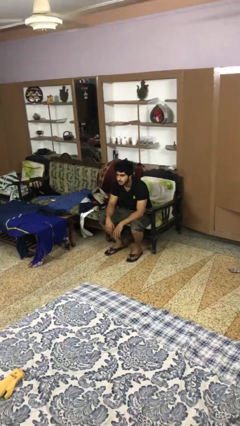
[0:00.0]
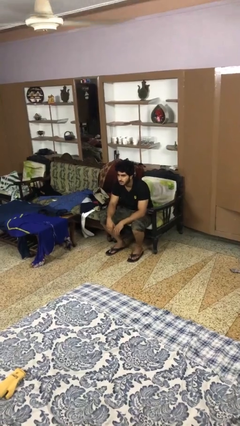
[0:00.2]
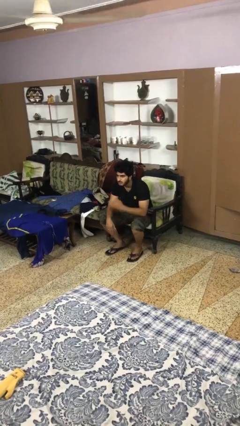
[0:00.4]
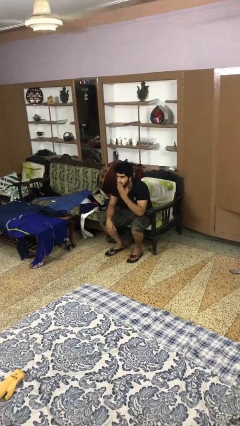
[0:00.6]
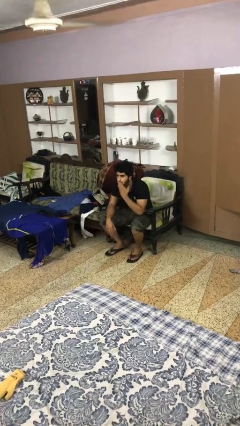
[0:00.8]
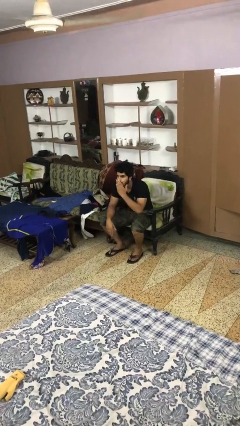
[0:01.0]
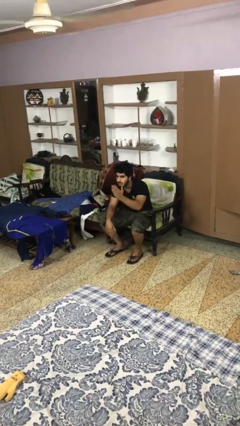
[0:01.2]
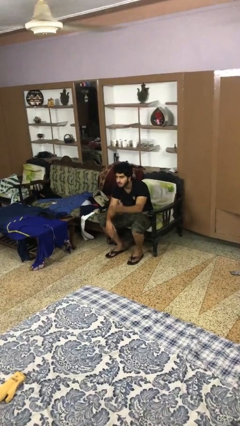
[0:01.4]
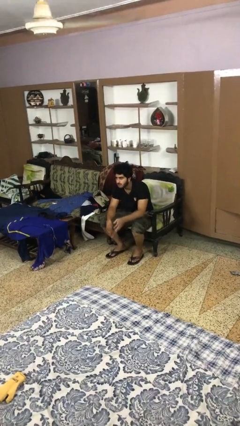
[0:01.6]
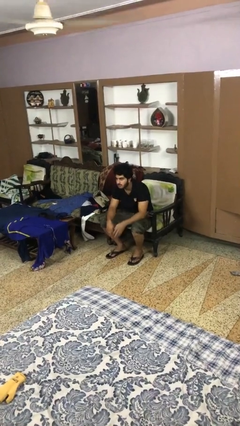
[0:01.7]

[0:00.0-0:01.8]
person gestures blow kiss

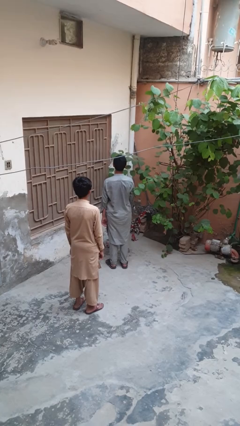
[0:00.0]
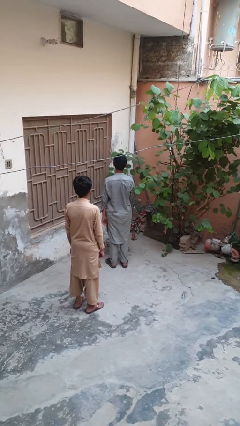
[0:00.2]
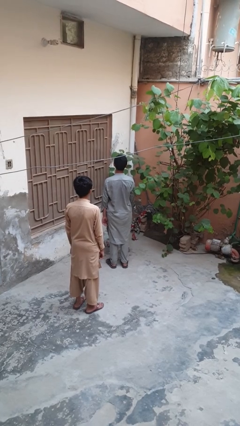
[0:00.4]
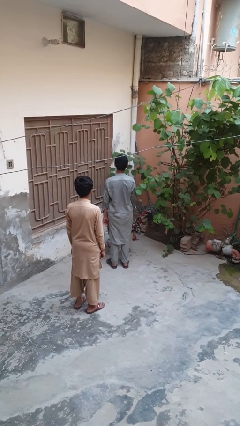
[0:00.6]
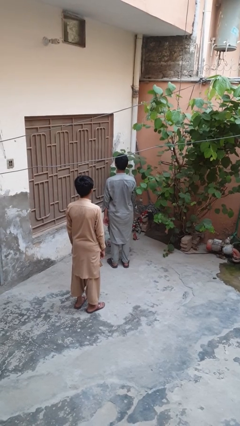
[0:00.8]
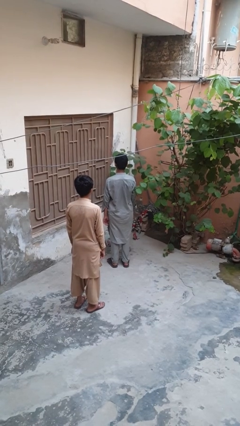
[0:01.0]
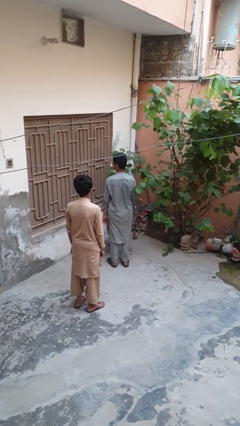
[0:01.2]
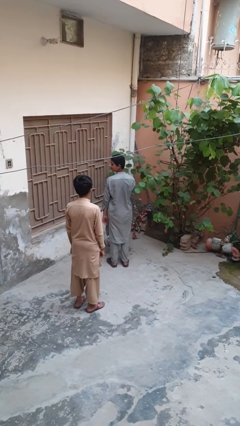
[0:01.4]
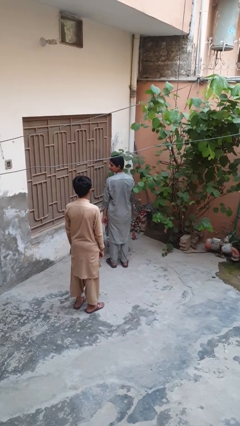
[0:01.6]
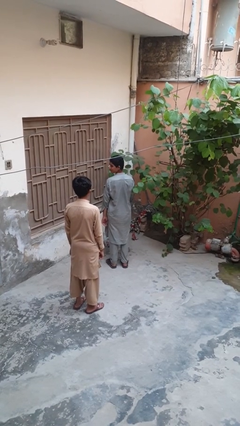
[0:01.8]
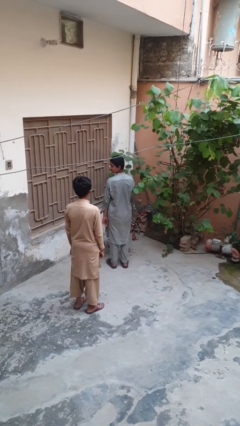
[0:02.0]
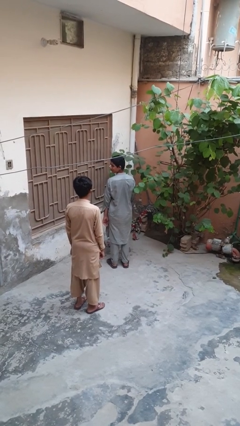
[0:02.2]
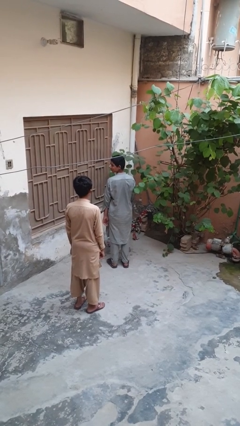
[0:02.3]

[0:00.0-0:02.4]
person looks over shoulder

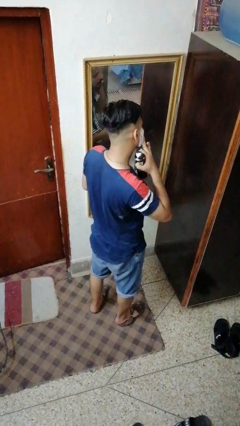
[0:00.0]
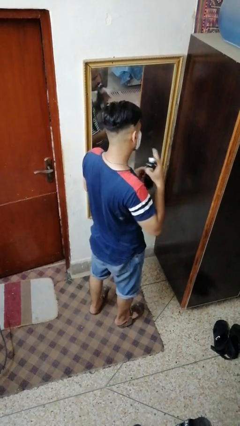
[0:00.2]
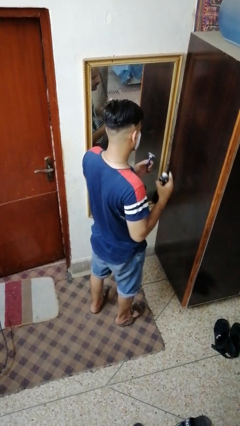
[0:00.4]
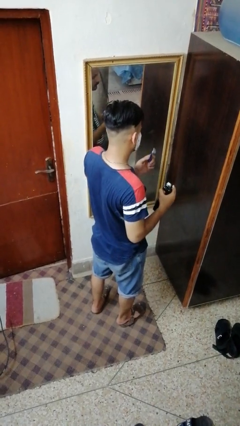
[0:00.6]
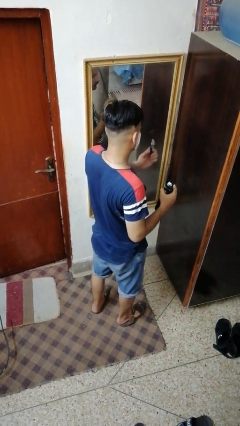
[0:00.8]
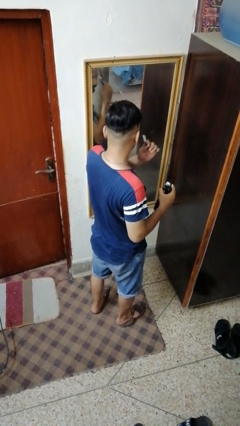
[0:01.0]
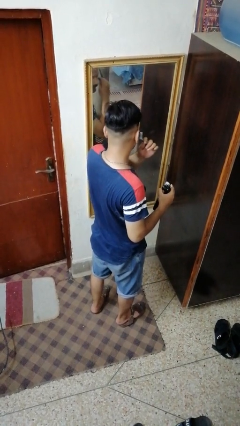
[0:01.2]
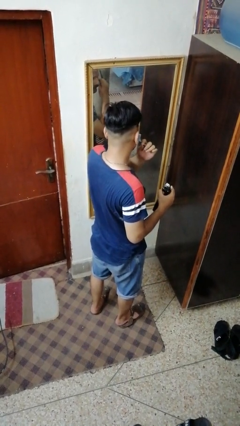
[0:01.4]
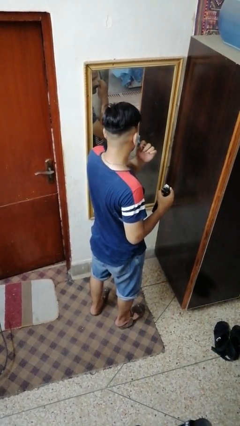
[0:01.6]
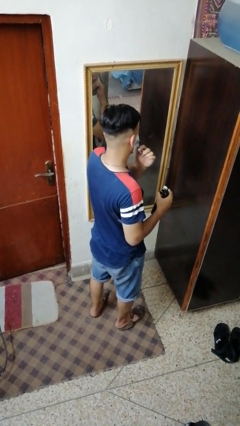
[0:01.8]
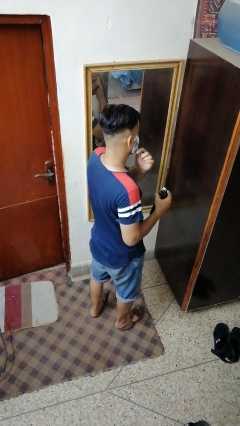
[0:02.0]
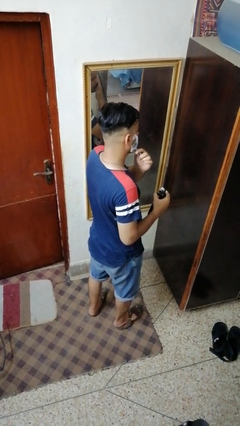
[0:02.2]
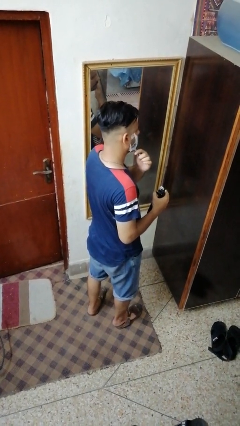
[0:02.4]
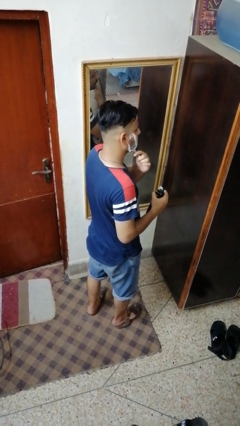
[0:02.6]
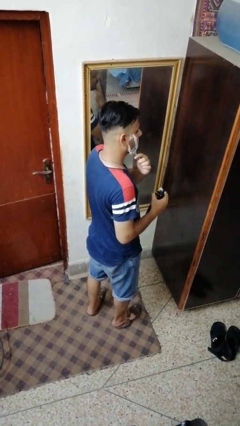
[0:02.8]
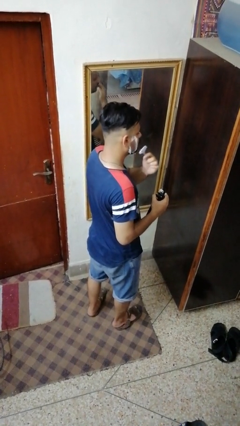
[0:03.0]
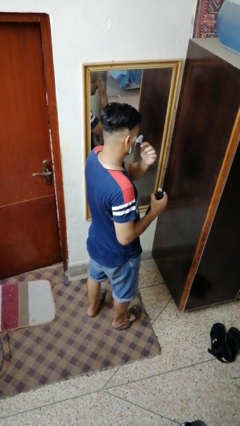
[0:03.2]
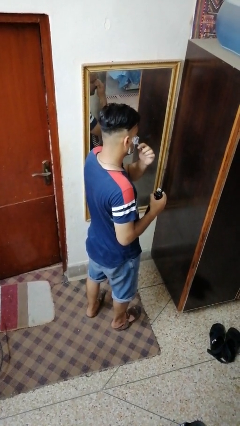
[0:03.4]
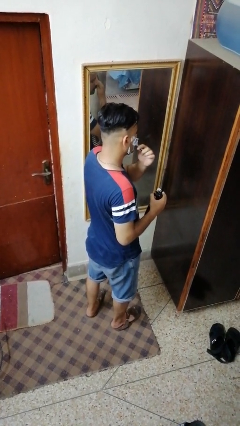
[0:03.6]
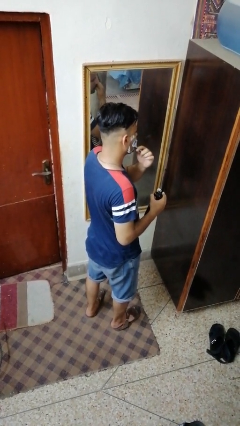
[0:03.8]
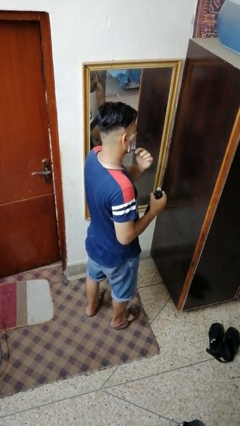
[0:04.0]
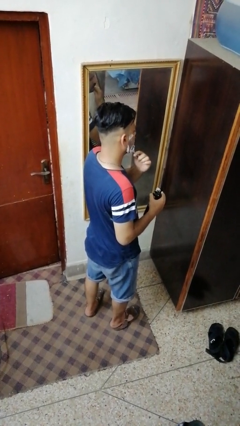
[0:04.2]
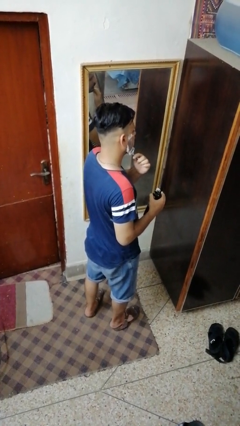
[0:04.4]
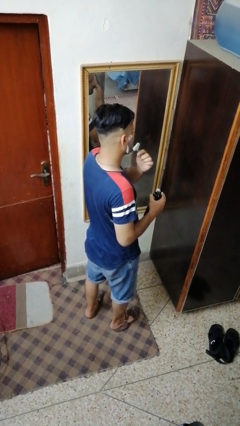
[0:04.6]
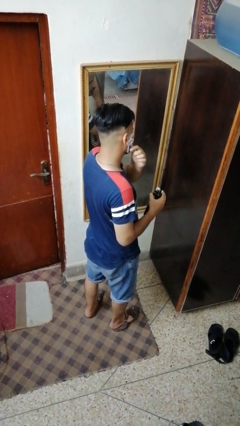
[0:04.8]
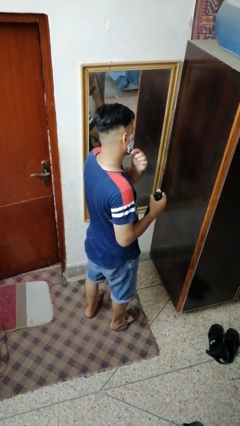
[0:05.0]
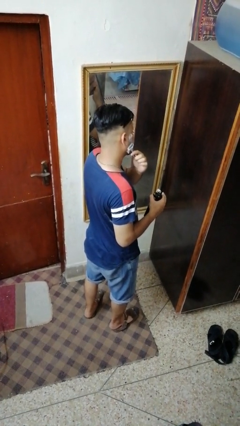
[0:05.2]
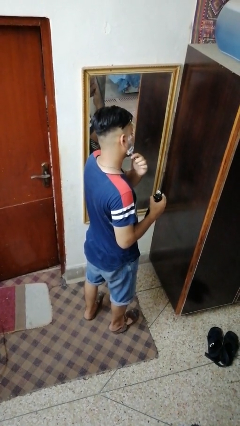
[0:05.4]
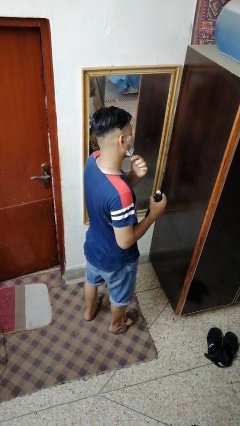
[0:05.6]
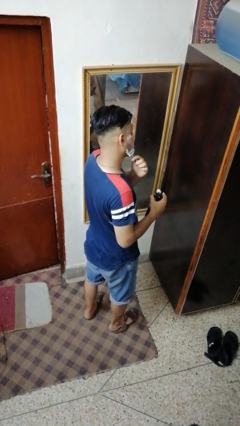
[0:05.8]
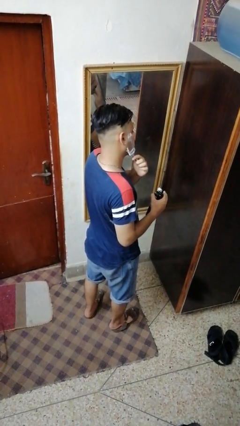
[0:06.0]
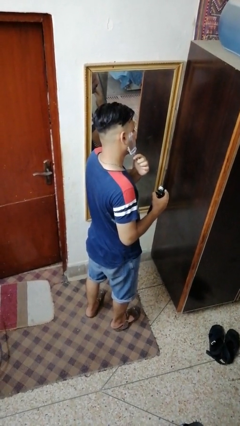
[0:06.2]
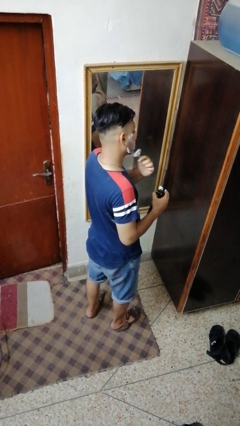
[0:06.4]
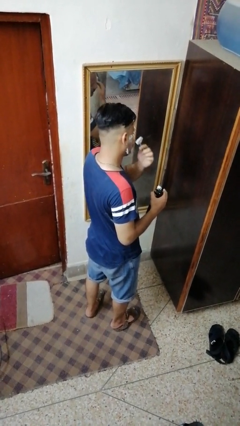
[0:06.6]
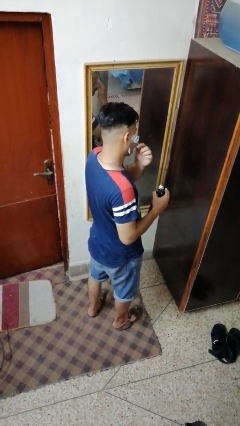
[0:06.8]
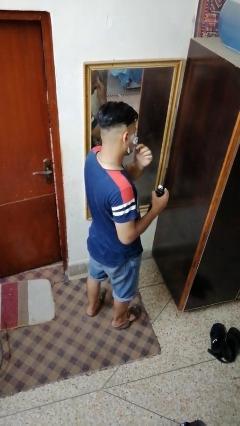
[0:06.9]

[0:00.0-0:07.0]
person shaves face

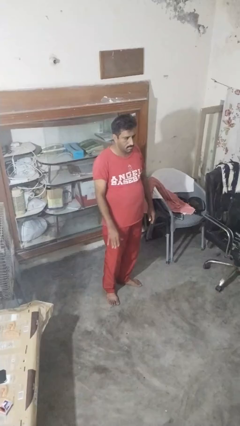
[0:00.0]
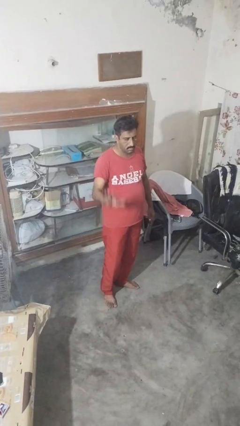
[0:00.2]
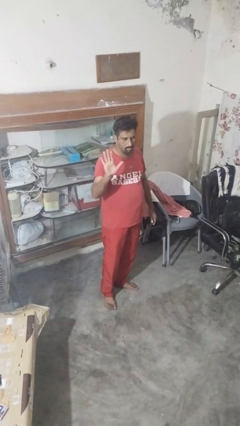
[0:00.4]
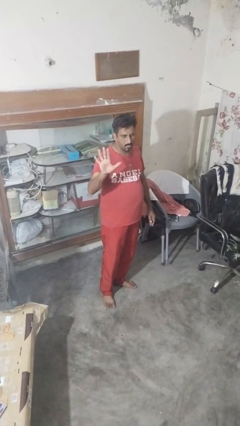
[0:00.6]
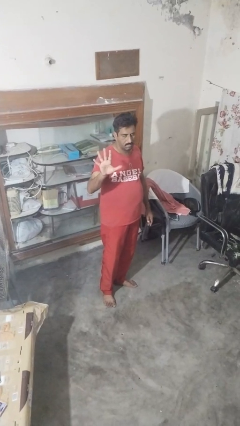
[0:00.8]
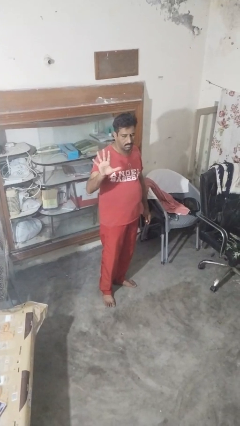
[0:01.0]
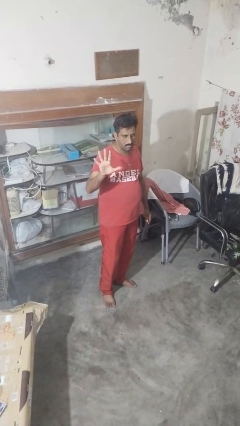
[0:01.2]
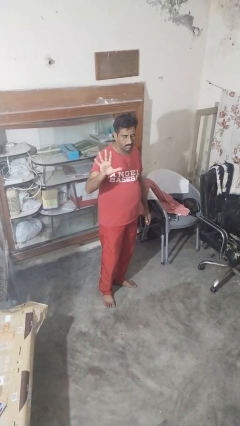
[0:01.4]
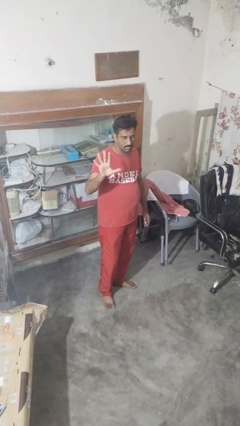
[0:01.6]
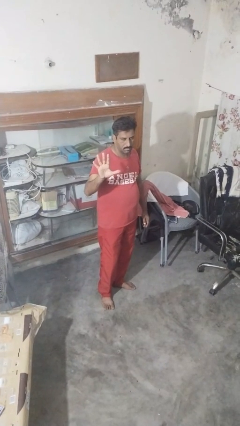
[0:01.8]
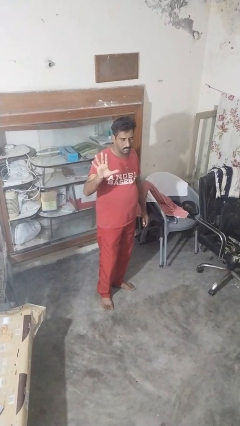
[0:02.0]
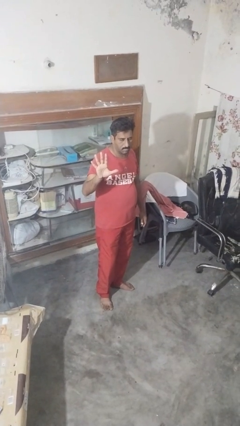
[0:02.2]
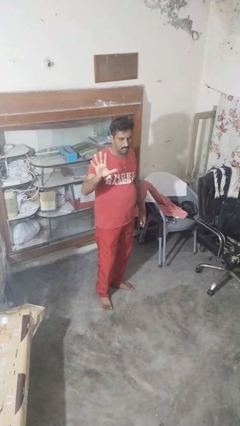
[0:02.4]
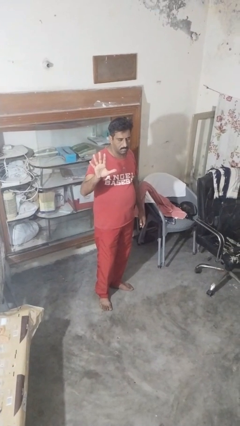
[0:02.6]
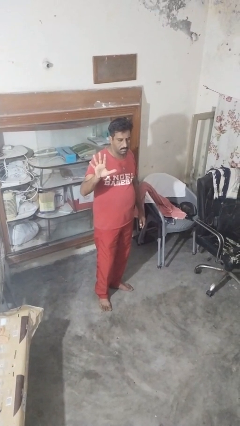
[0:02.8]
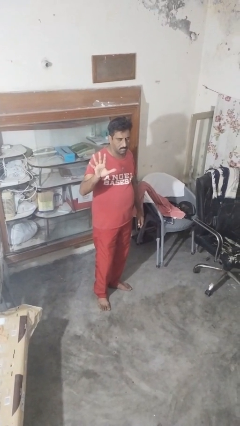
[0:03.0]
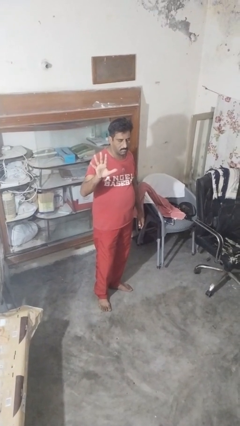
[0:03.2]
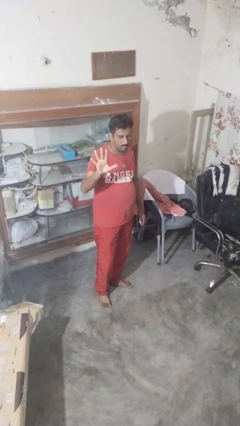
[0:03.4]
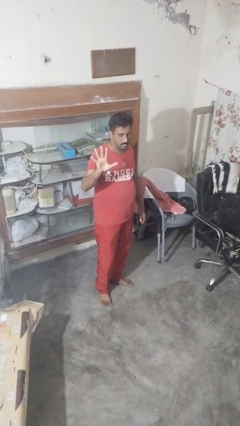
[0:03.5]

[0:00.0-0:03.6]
person gestures number five

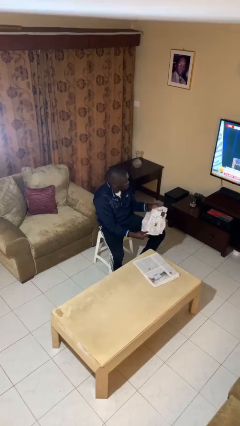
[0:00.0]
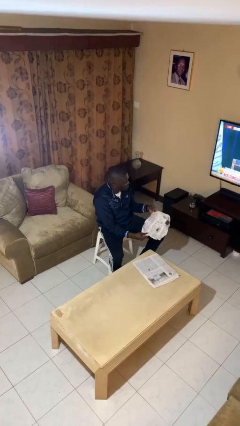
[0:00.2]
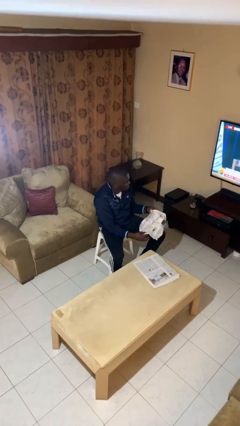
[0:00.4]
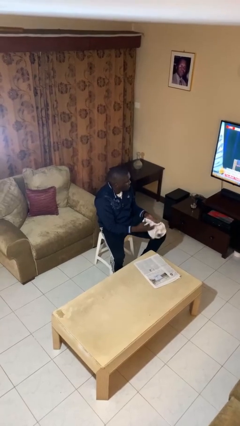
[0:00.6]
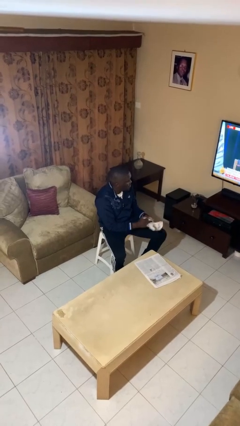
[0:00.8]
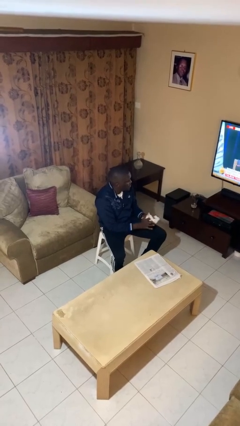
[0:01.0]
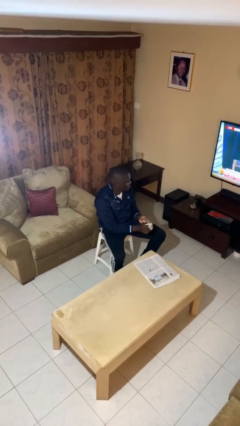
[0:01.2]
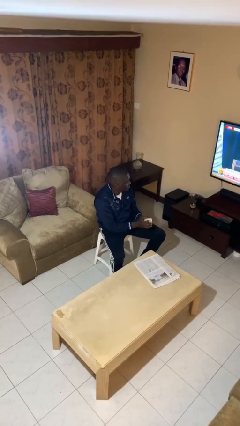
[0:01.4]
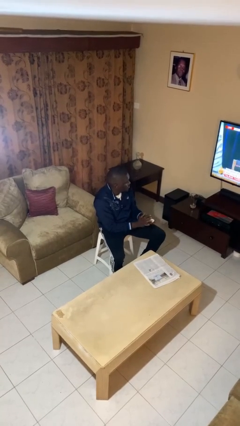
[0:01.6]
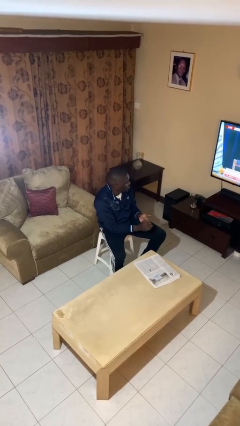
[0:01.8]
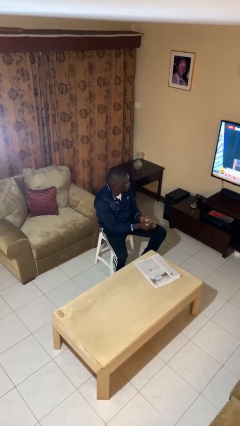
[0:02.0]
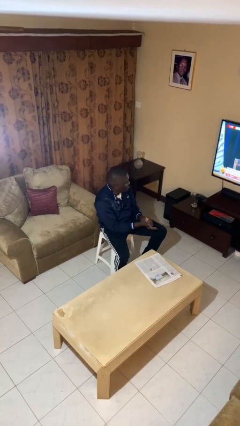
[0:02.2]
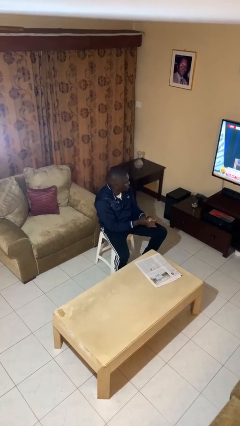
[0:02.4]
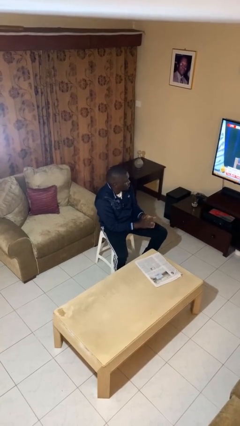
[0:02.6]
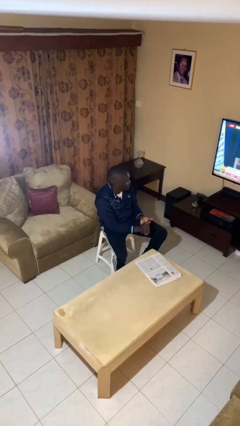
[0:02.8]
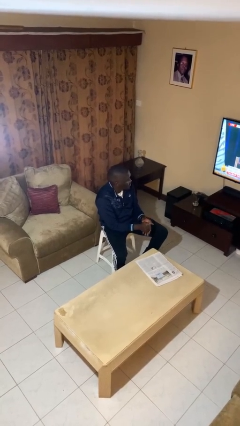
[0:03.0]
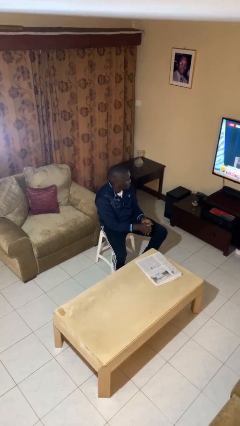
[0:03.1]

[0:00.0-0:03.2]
person crumples paper
